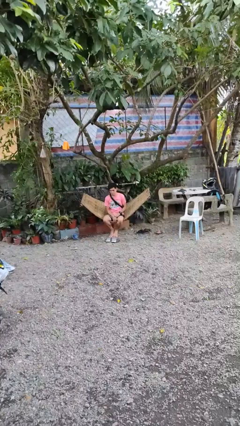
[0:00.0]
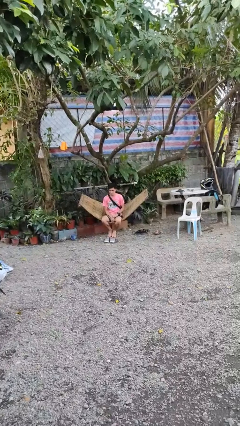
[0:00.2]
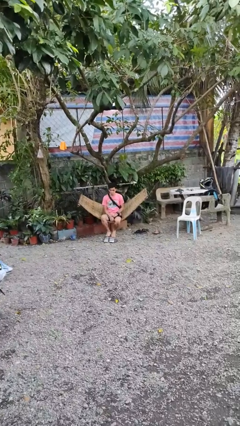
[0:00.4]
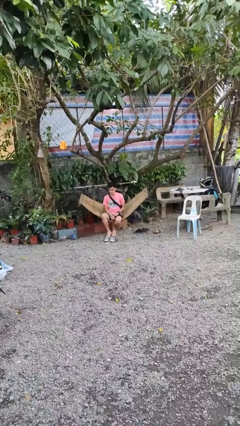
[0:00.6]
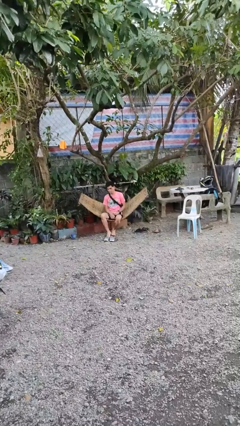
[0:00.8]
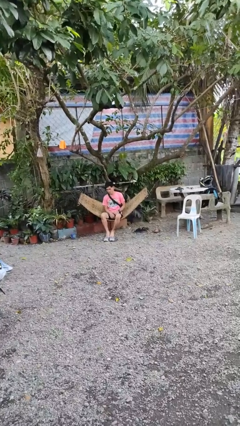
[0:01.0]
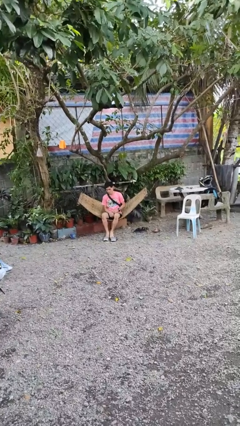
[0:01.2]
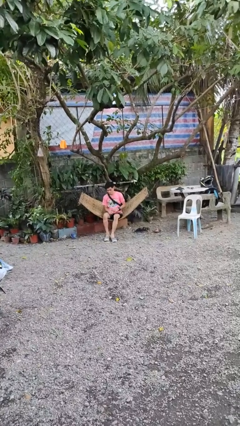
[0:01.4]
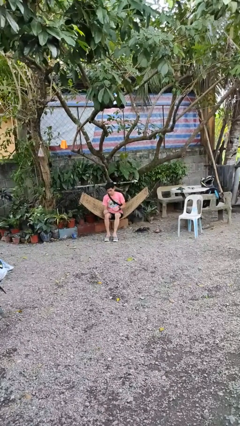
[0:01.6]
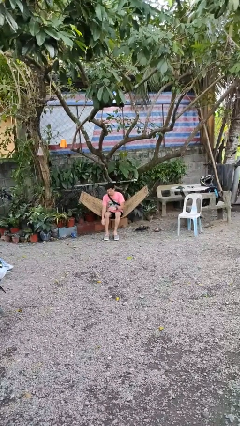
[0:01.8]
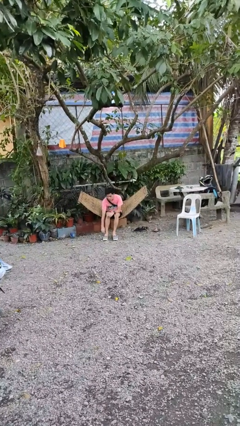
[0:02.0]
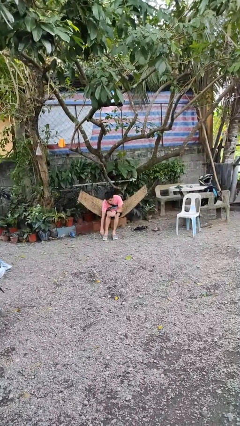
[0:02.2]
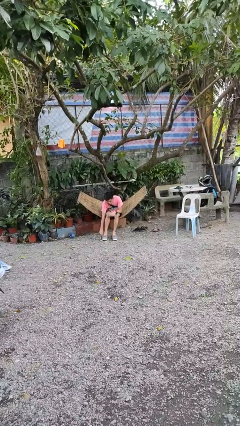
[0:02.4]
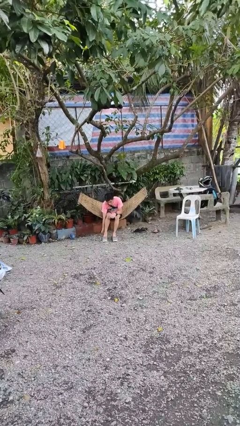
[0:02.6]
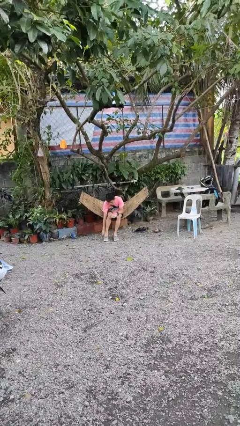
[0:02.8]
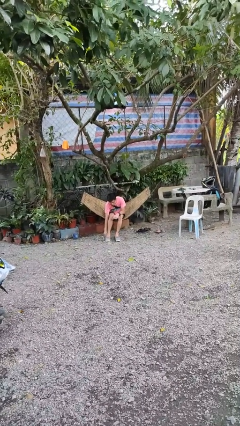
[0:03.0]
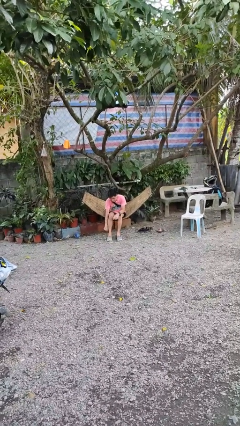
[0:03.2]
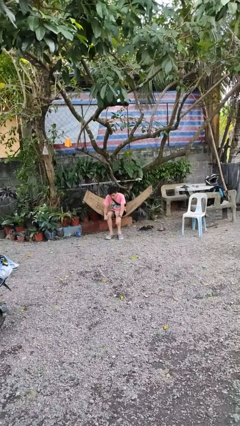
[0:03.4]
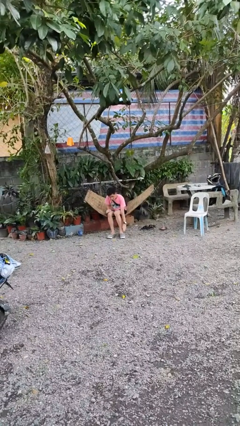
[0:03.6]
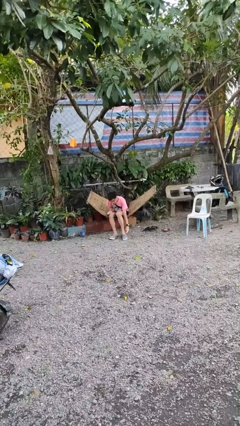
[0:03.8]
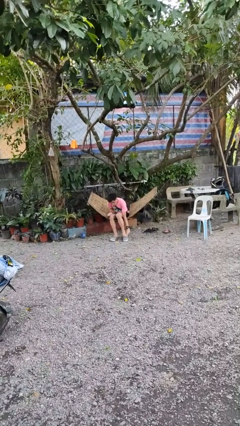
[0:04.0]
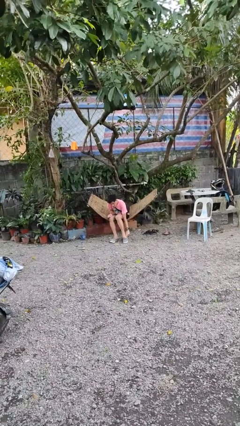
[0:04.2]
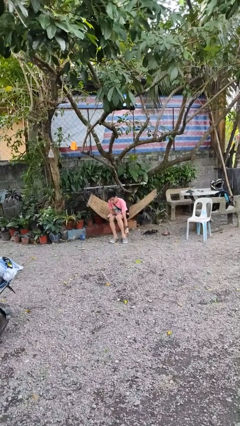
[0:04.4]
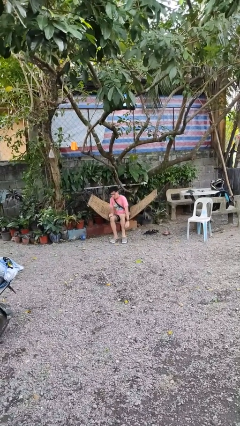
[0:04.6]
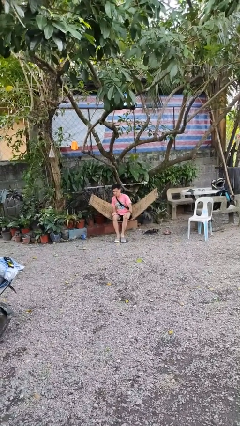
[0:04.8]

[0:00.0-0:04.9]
person puts on shoes

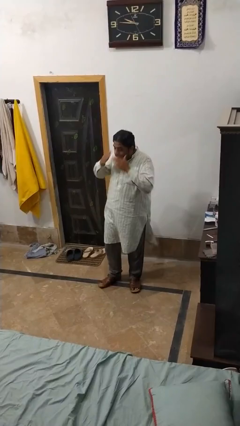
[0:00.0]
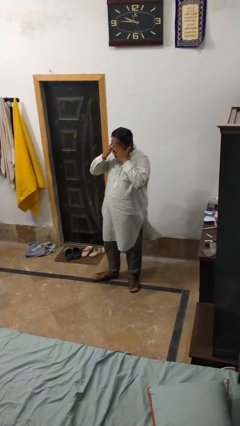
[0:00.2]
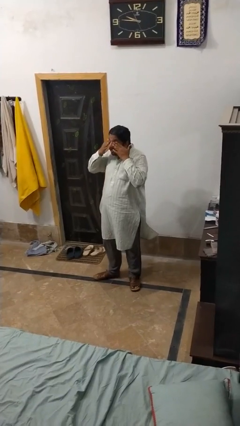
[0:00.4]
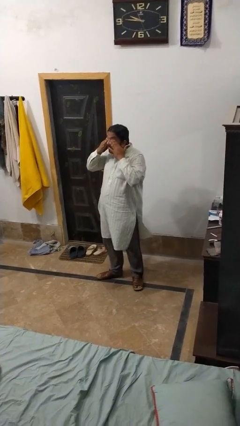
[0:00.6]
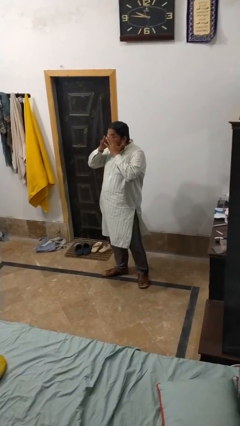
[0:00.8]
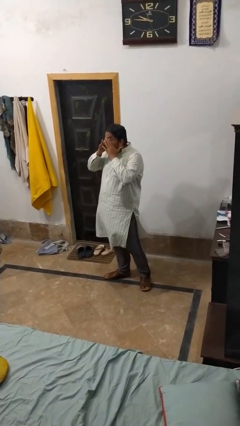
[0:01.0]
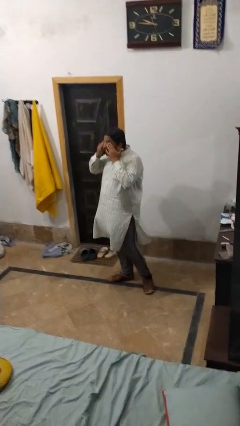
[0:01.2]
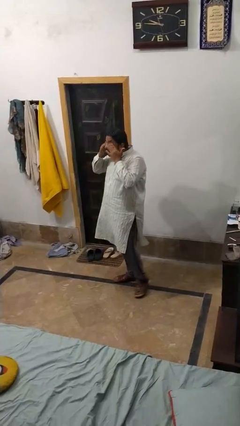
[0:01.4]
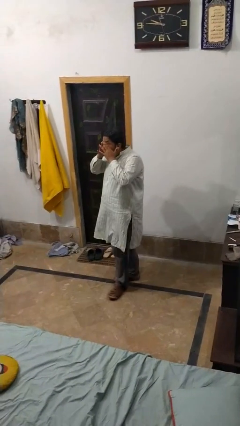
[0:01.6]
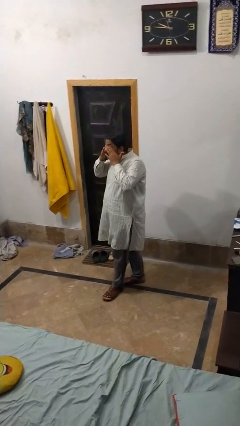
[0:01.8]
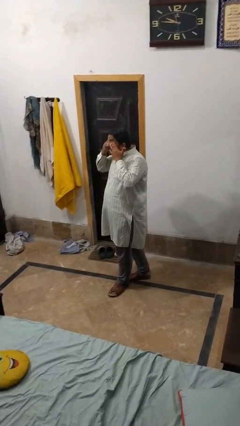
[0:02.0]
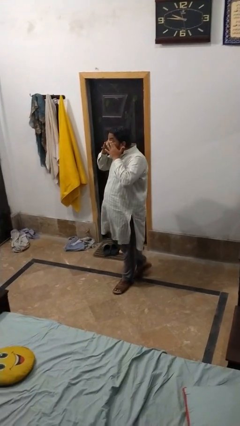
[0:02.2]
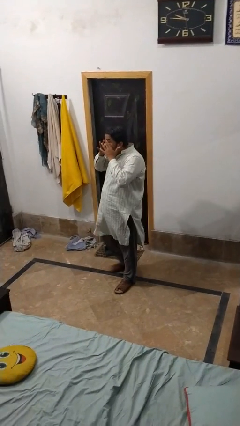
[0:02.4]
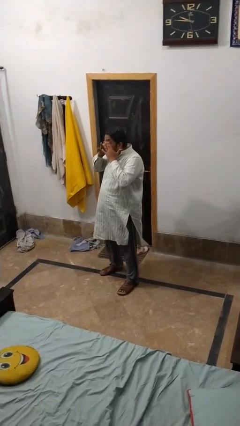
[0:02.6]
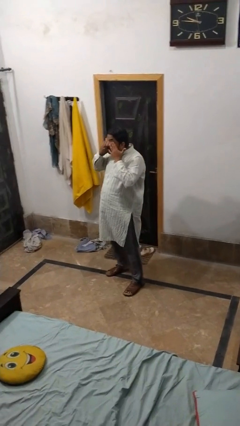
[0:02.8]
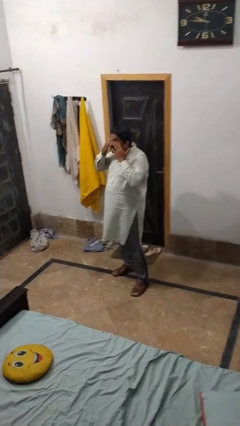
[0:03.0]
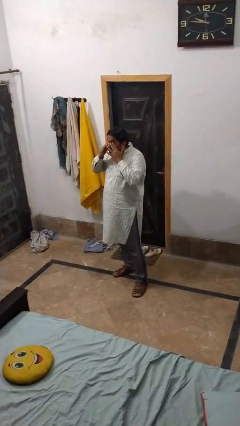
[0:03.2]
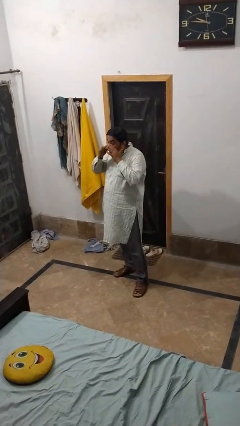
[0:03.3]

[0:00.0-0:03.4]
person rubs eyes

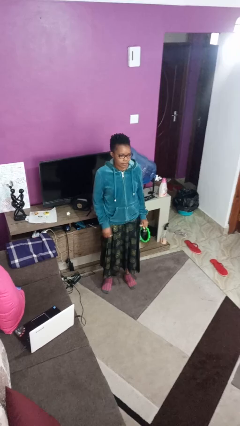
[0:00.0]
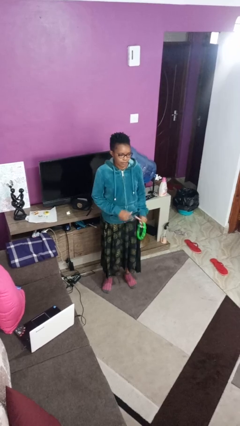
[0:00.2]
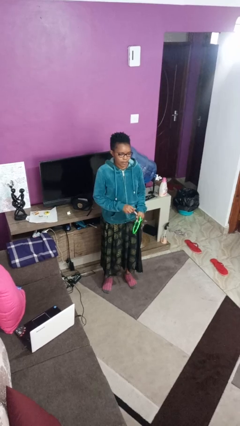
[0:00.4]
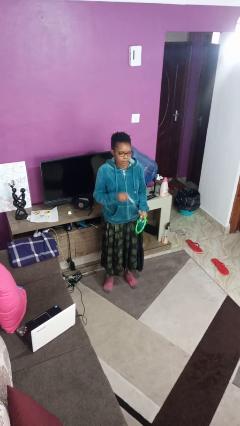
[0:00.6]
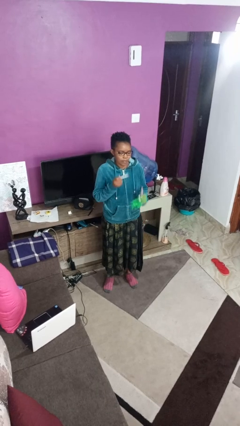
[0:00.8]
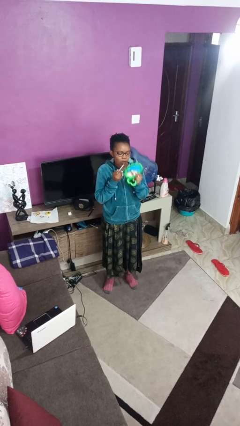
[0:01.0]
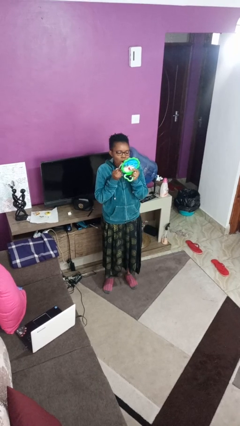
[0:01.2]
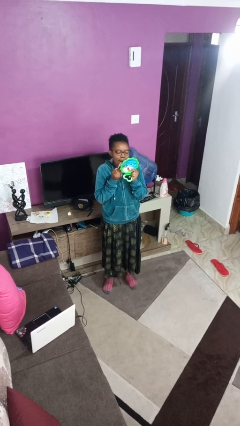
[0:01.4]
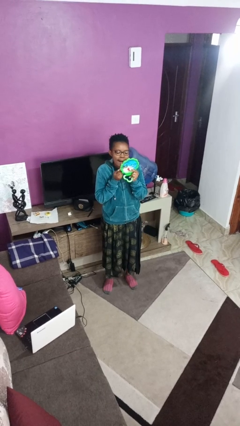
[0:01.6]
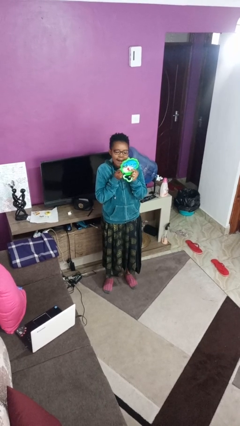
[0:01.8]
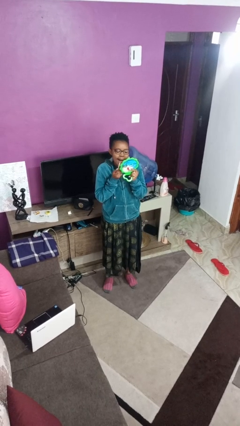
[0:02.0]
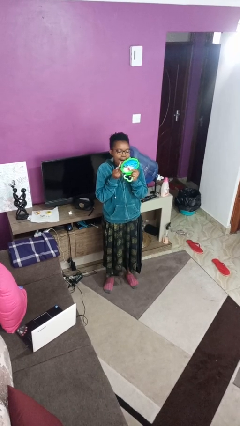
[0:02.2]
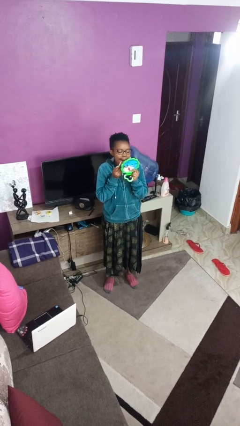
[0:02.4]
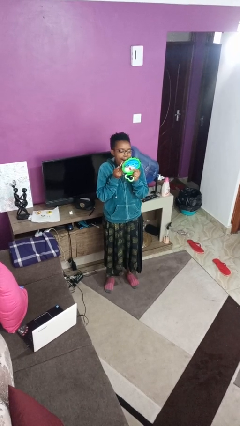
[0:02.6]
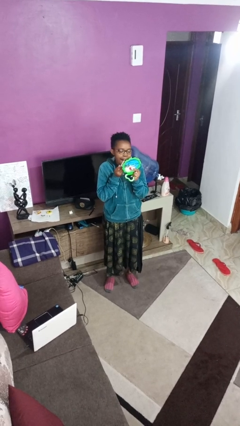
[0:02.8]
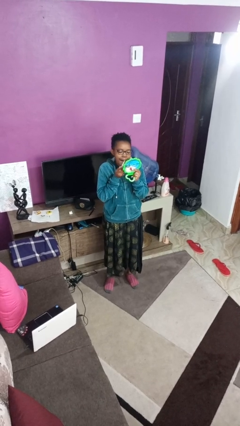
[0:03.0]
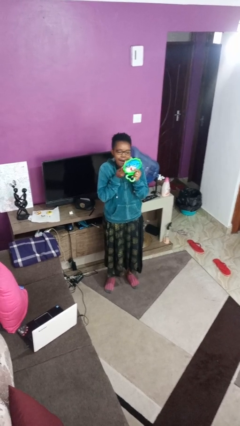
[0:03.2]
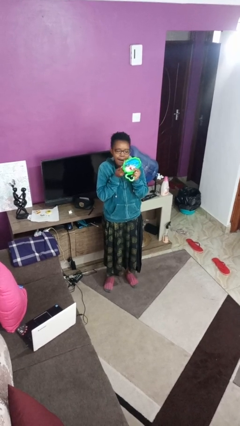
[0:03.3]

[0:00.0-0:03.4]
person applies lip makeup

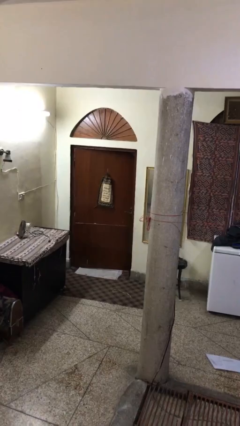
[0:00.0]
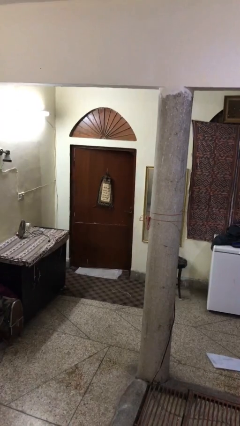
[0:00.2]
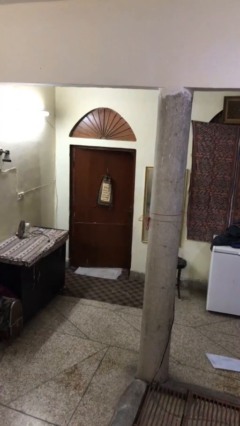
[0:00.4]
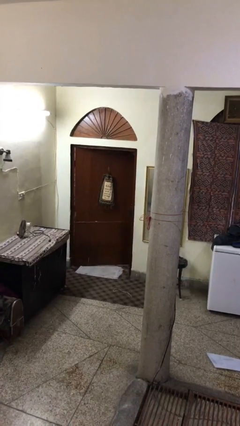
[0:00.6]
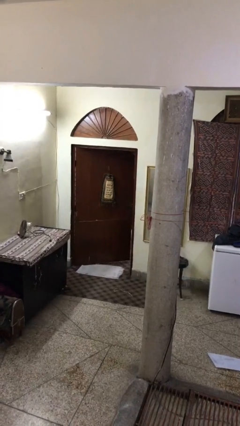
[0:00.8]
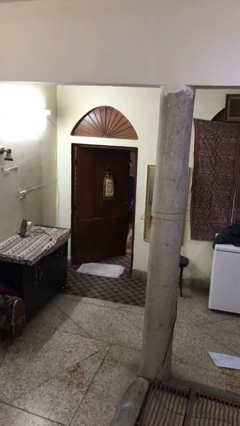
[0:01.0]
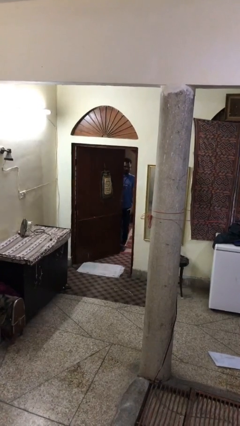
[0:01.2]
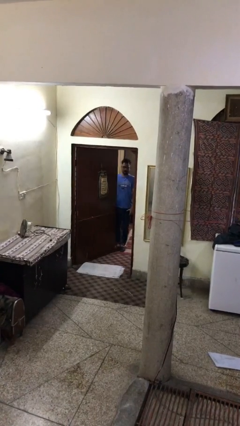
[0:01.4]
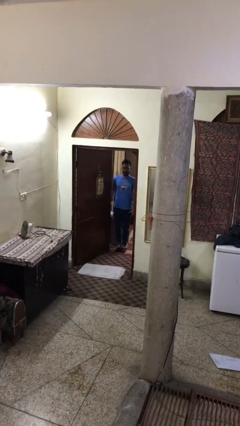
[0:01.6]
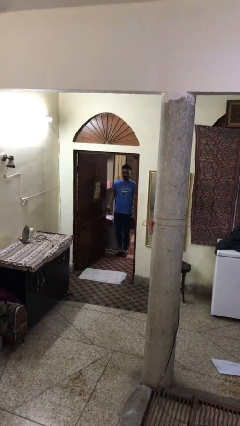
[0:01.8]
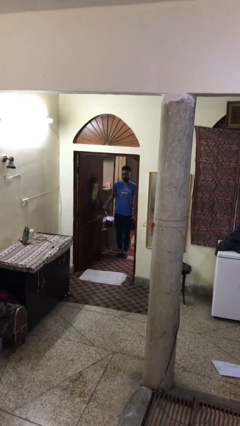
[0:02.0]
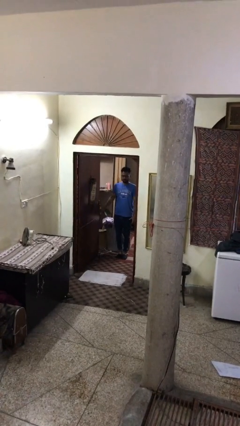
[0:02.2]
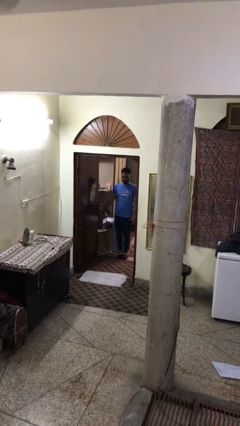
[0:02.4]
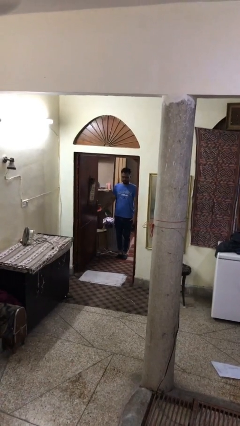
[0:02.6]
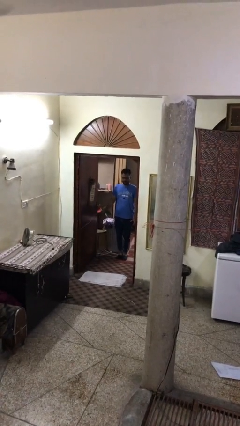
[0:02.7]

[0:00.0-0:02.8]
person opens facility door

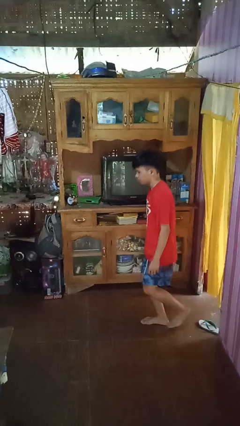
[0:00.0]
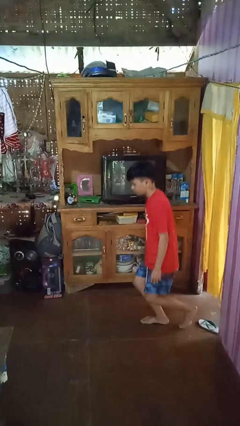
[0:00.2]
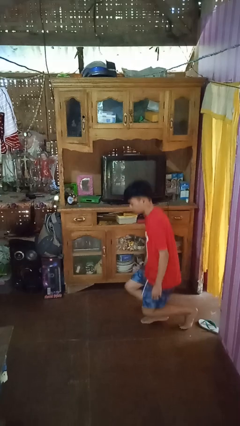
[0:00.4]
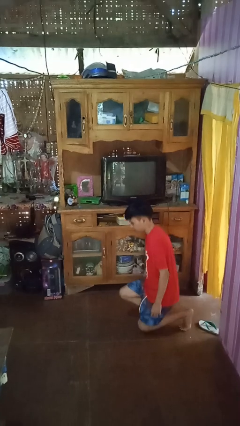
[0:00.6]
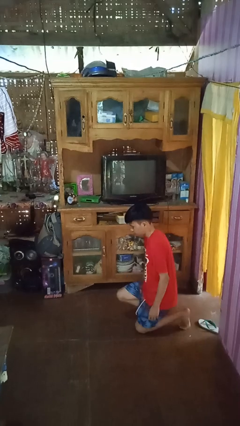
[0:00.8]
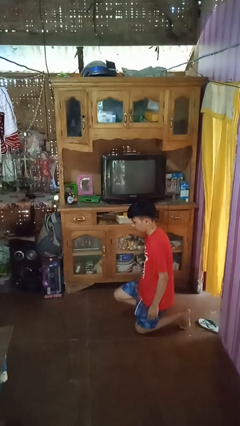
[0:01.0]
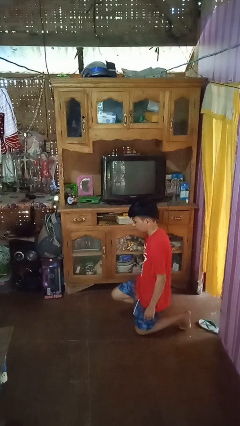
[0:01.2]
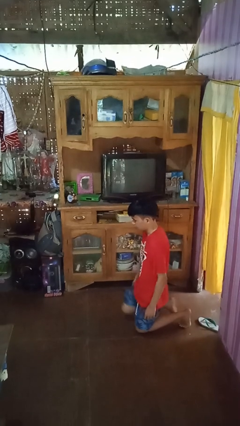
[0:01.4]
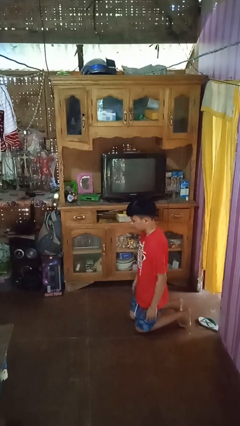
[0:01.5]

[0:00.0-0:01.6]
person kneels

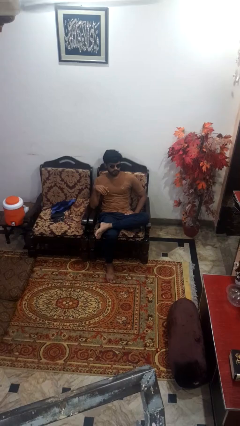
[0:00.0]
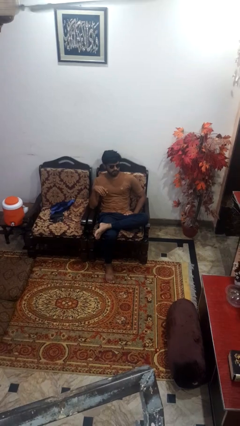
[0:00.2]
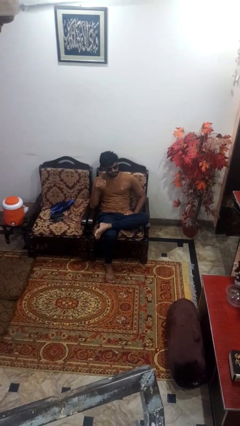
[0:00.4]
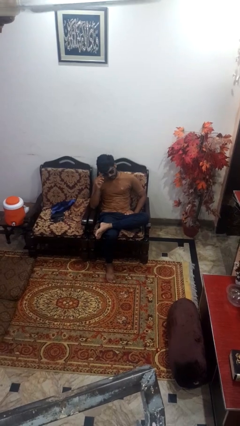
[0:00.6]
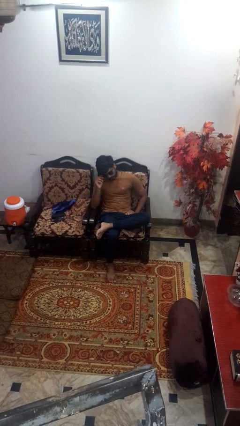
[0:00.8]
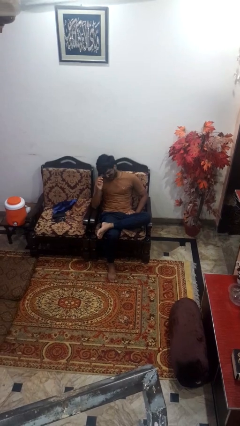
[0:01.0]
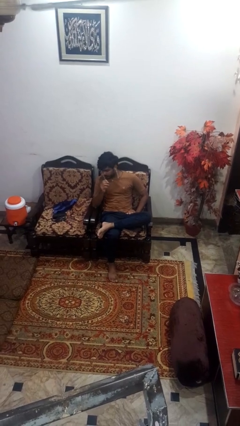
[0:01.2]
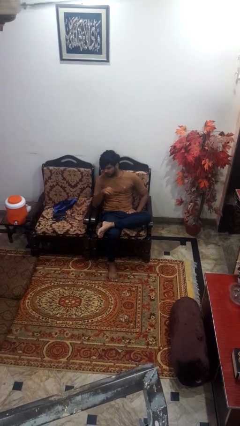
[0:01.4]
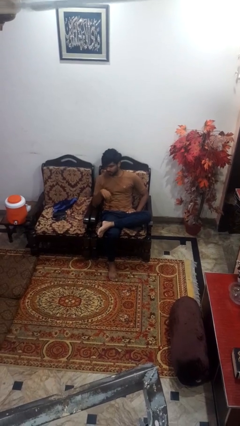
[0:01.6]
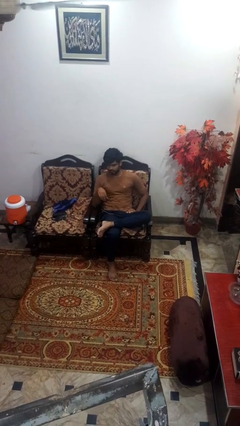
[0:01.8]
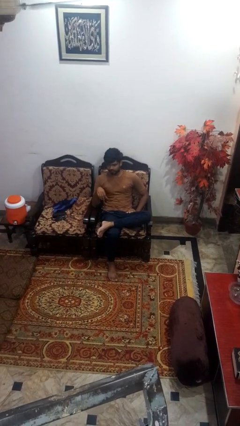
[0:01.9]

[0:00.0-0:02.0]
person takes off sunglasses
